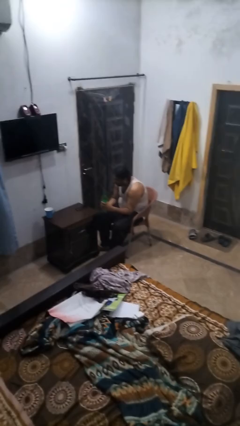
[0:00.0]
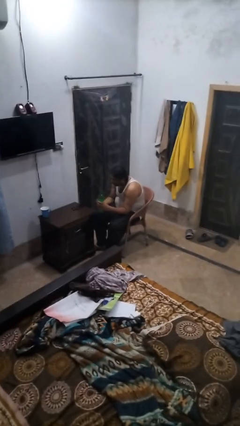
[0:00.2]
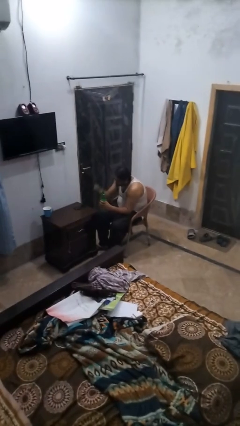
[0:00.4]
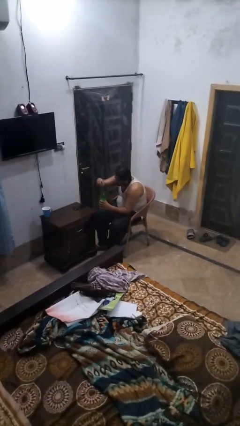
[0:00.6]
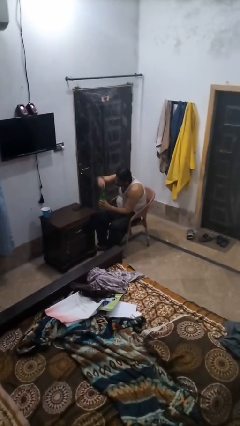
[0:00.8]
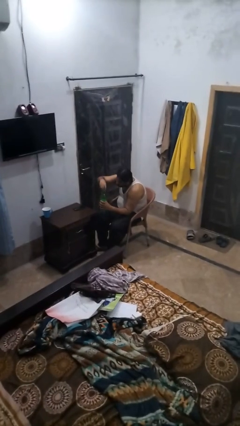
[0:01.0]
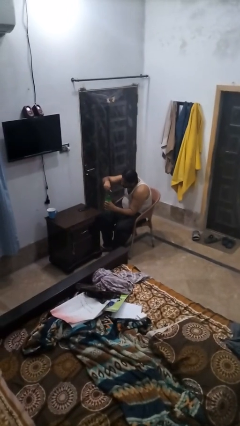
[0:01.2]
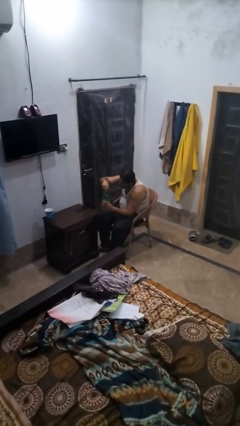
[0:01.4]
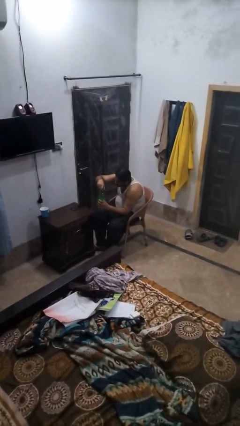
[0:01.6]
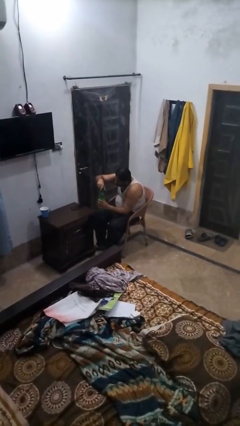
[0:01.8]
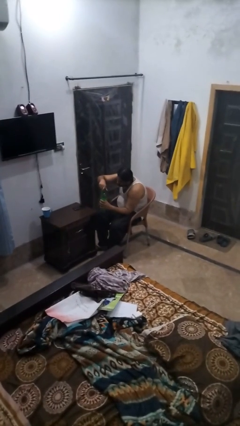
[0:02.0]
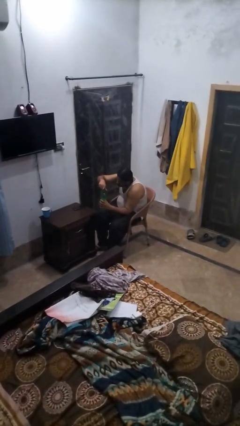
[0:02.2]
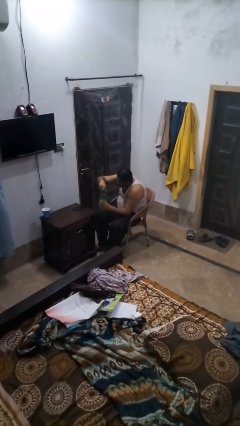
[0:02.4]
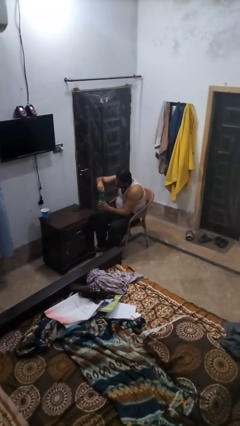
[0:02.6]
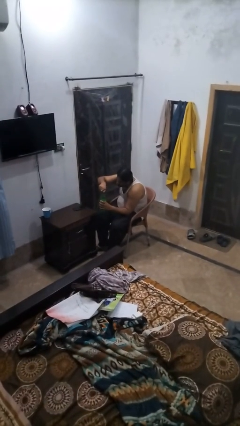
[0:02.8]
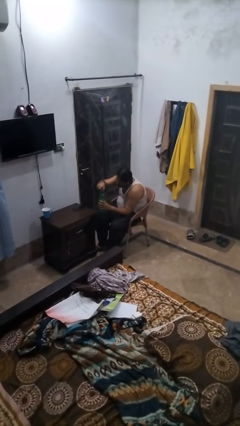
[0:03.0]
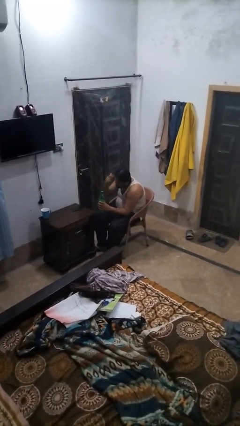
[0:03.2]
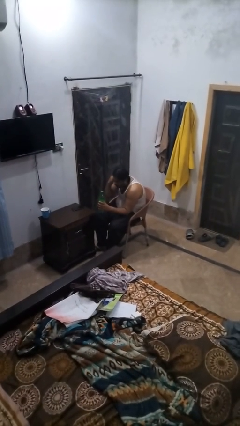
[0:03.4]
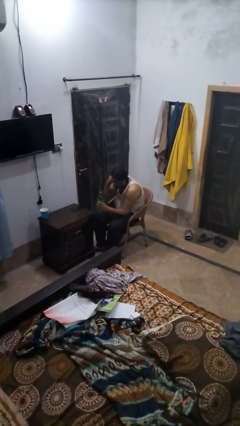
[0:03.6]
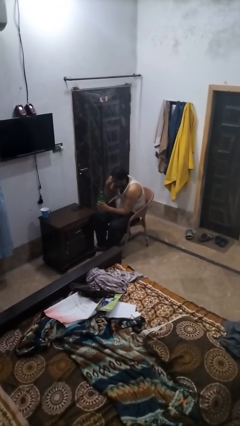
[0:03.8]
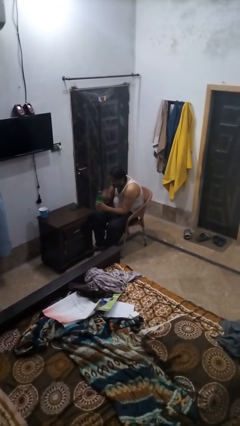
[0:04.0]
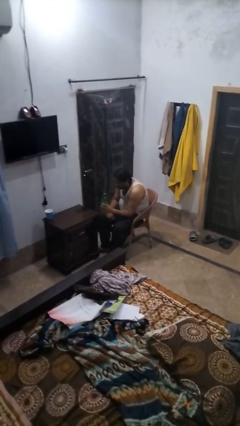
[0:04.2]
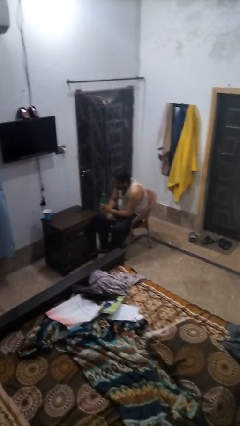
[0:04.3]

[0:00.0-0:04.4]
person screws lid to bottle

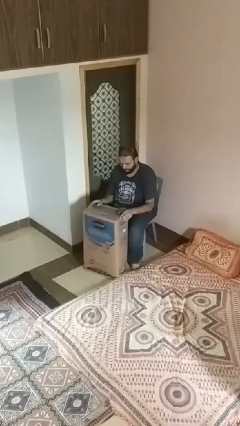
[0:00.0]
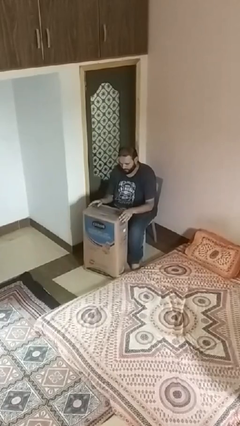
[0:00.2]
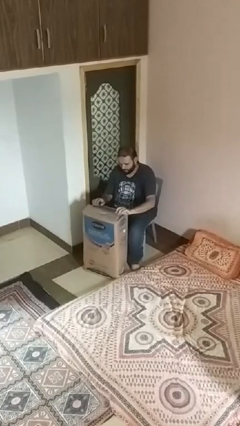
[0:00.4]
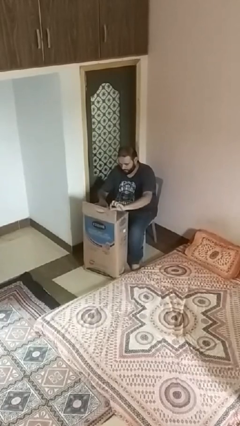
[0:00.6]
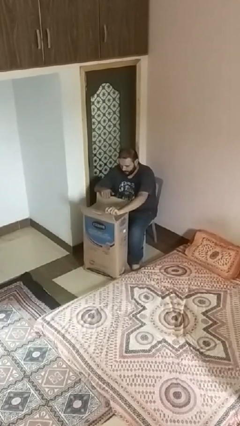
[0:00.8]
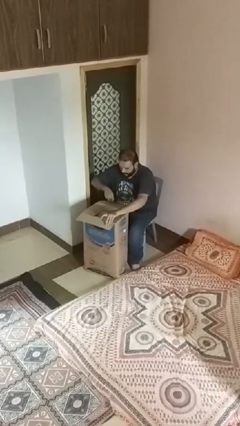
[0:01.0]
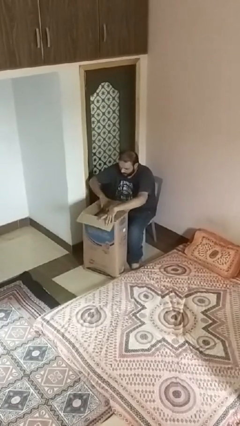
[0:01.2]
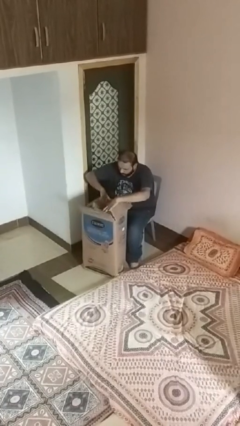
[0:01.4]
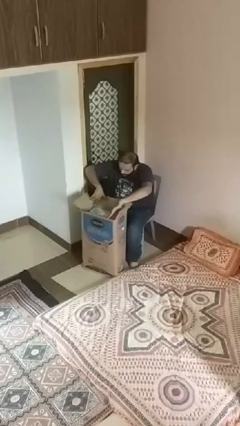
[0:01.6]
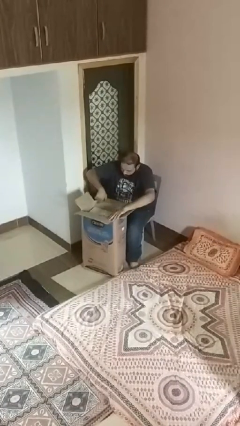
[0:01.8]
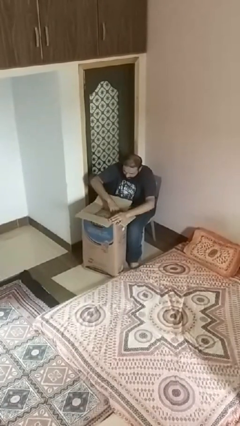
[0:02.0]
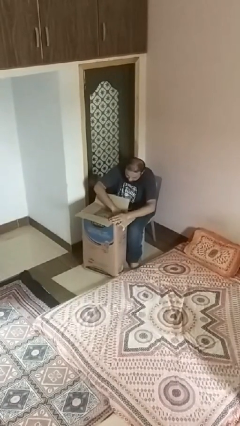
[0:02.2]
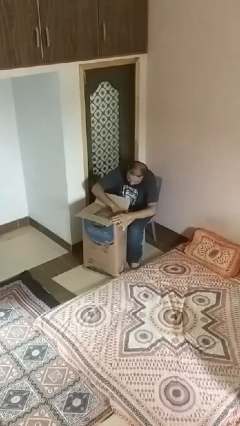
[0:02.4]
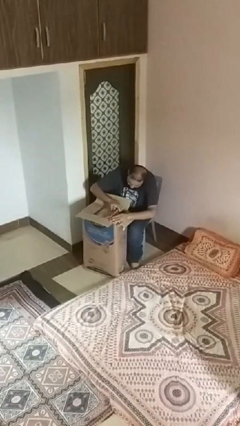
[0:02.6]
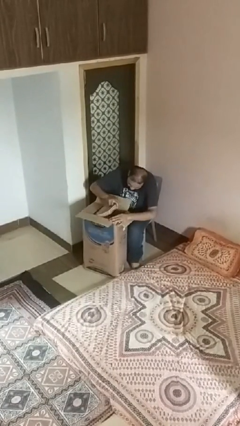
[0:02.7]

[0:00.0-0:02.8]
person searches in box

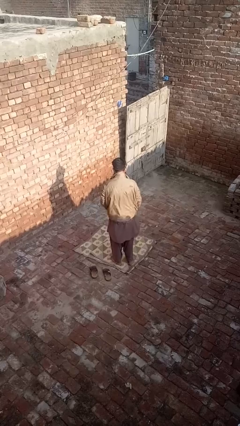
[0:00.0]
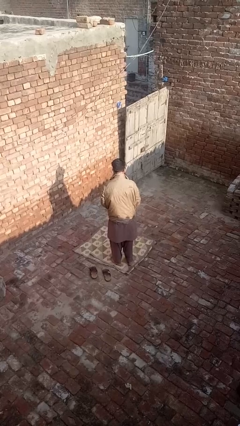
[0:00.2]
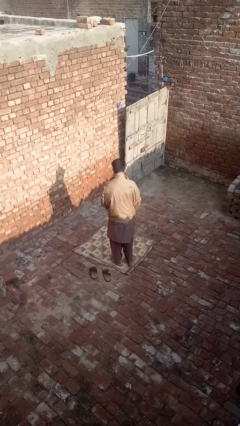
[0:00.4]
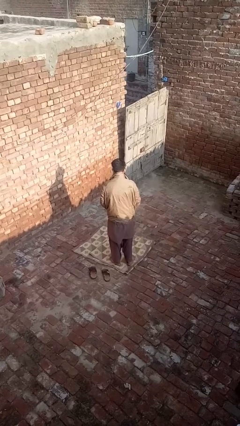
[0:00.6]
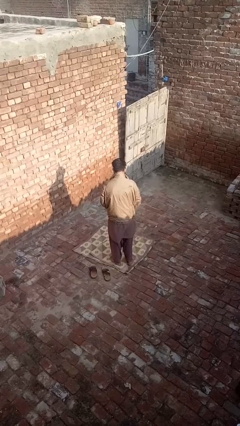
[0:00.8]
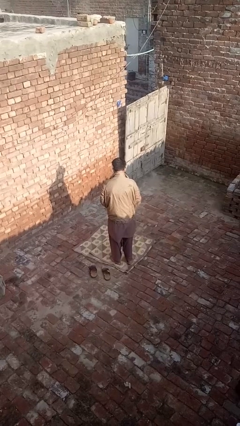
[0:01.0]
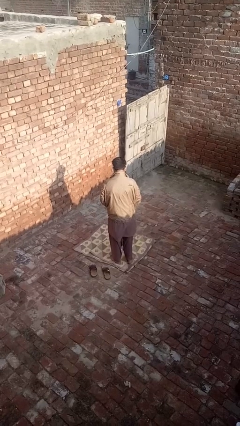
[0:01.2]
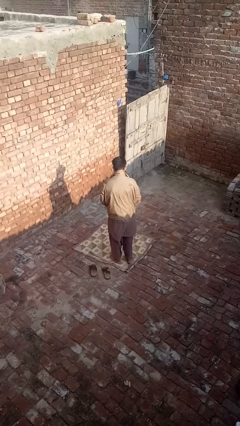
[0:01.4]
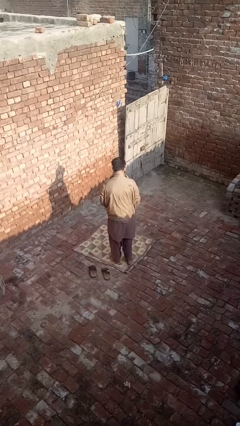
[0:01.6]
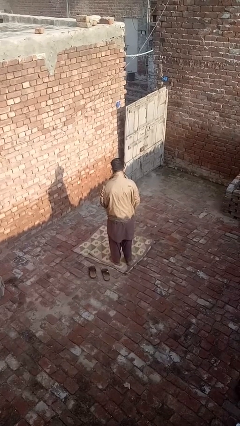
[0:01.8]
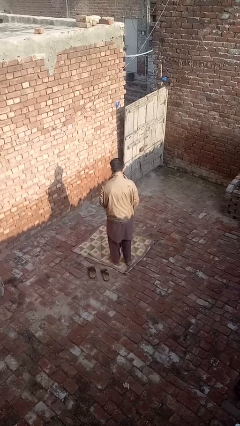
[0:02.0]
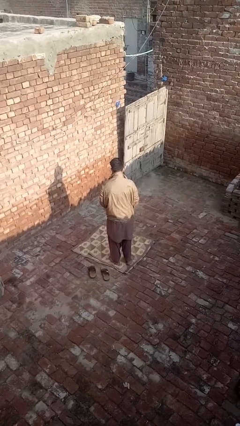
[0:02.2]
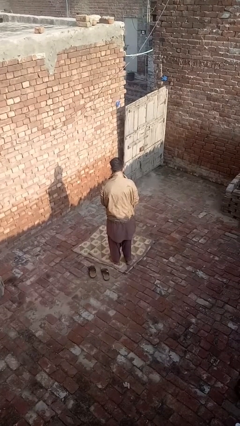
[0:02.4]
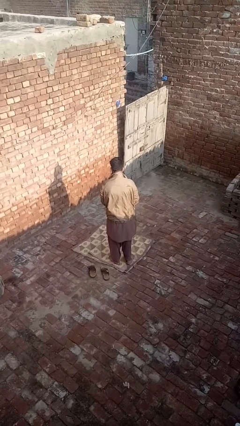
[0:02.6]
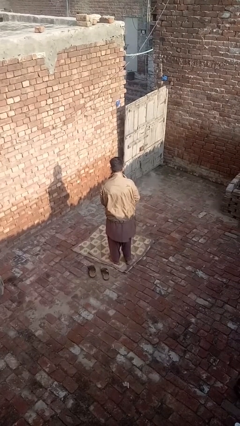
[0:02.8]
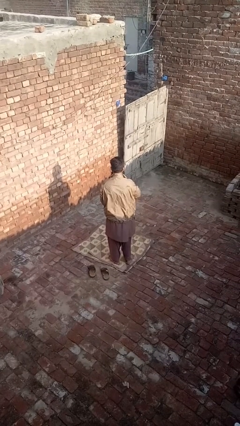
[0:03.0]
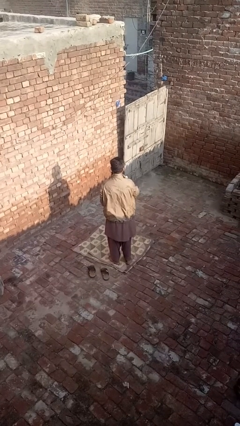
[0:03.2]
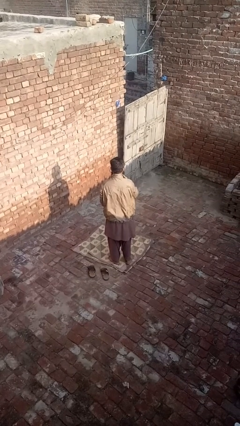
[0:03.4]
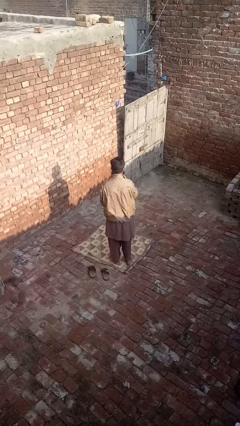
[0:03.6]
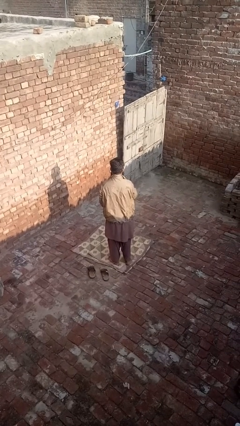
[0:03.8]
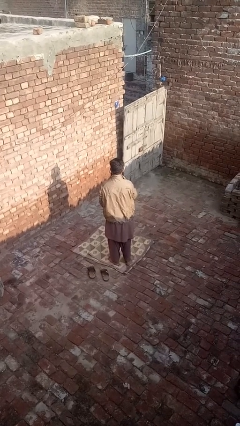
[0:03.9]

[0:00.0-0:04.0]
person zips up jacket

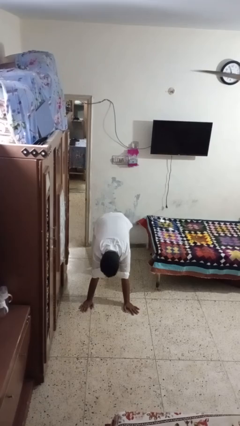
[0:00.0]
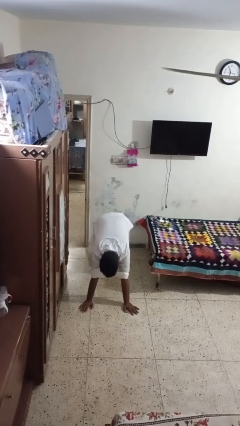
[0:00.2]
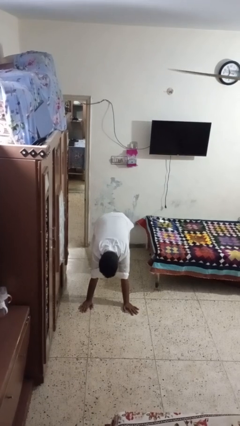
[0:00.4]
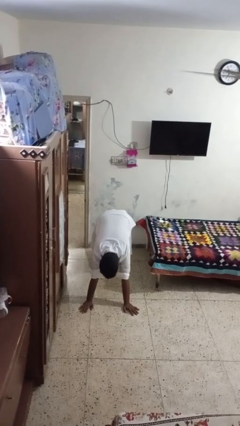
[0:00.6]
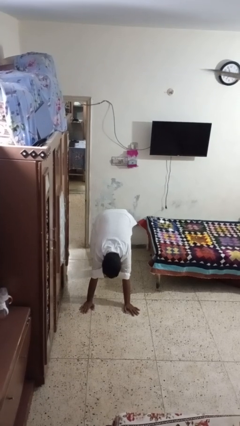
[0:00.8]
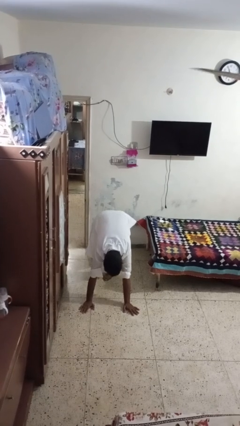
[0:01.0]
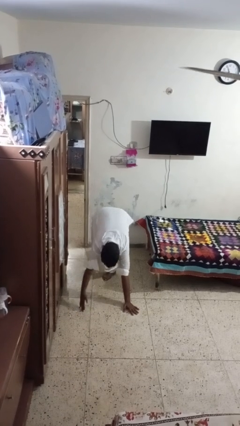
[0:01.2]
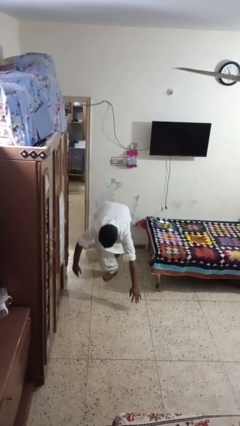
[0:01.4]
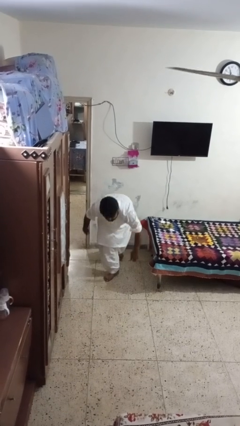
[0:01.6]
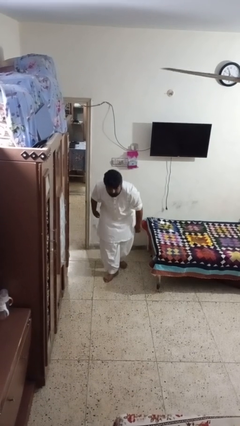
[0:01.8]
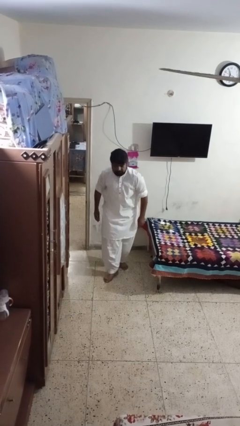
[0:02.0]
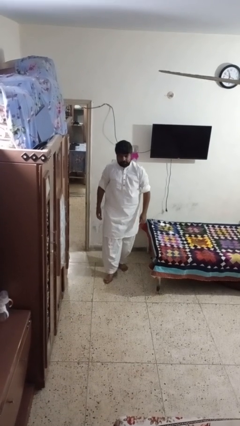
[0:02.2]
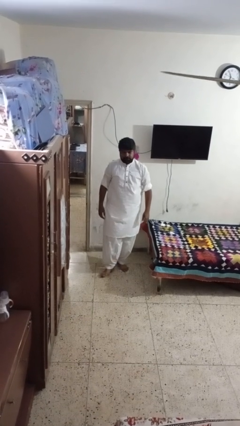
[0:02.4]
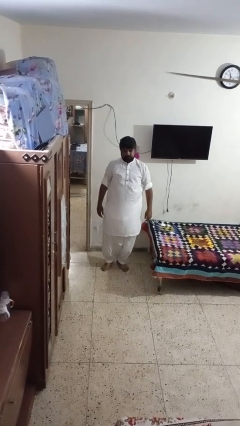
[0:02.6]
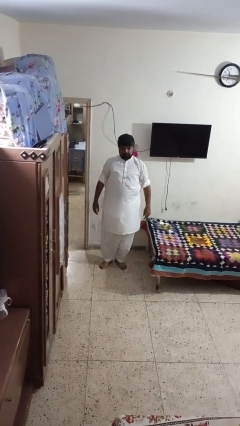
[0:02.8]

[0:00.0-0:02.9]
person stands up from floor

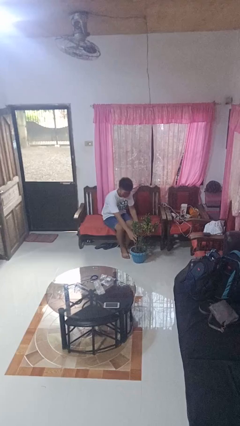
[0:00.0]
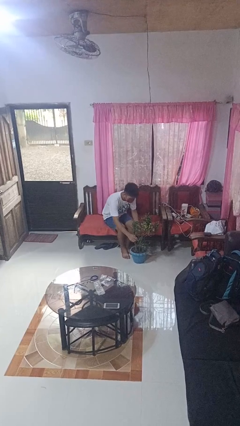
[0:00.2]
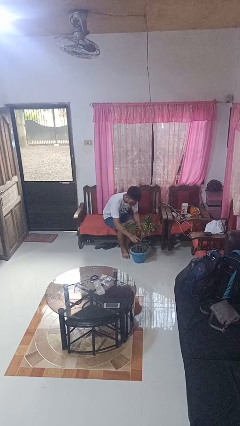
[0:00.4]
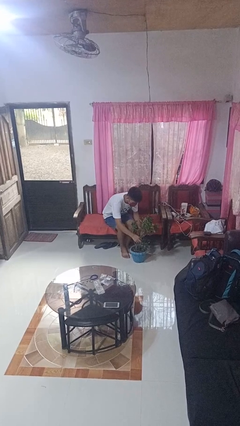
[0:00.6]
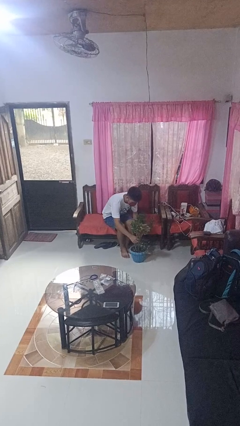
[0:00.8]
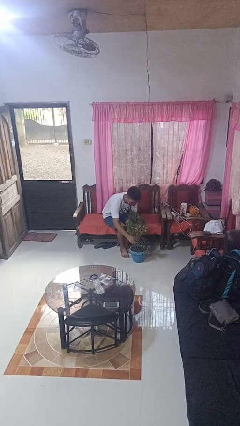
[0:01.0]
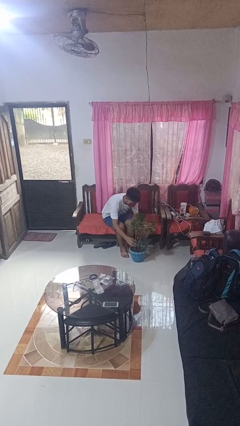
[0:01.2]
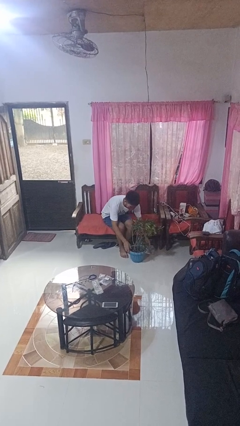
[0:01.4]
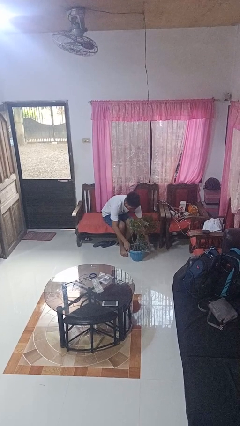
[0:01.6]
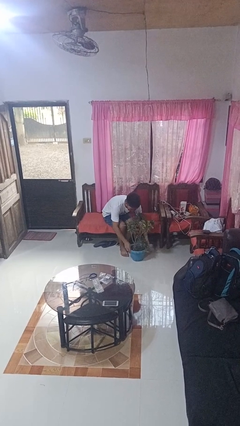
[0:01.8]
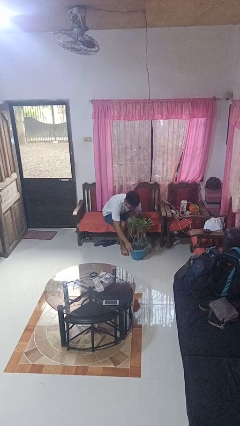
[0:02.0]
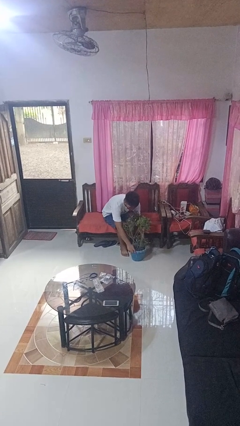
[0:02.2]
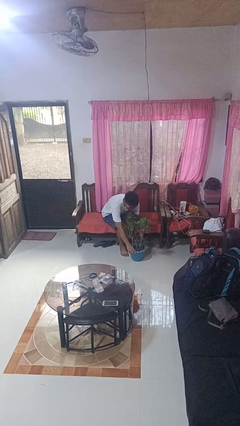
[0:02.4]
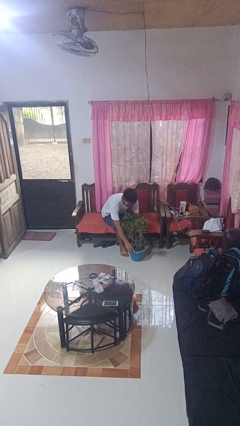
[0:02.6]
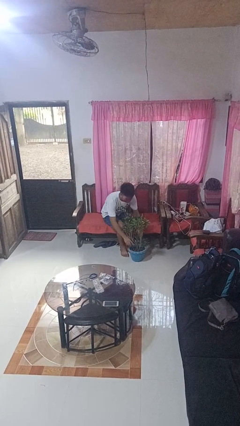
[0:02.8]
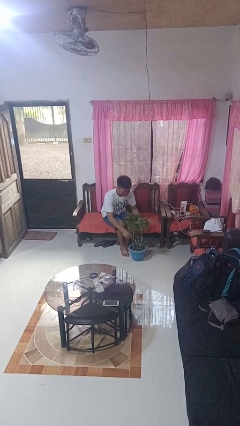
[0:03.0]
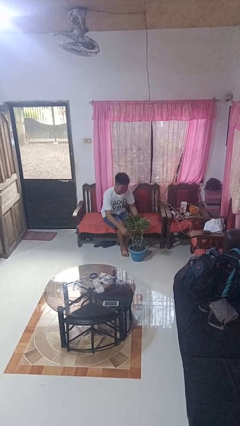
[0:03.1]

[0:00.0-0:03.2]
person arranges flowers in vase

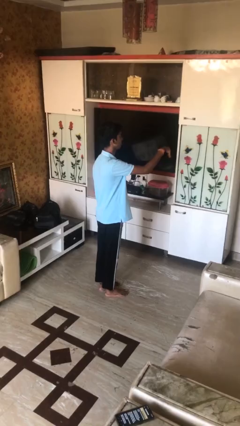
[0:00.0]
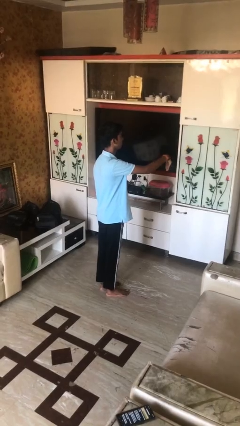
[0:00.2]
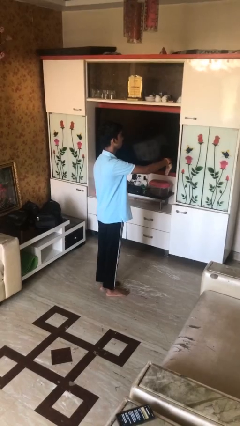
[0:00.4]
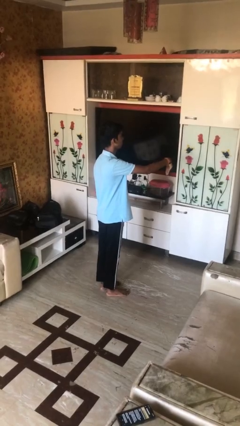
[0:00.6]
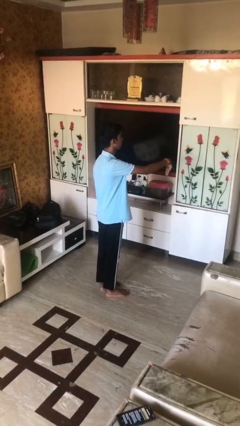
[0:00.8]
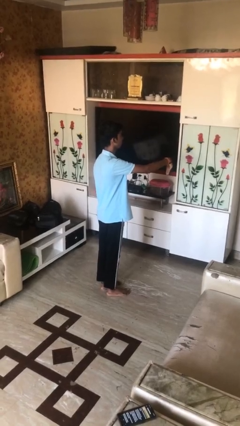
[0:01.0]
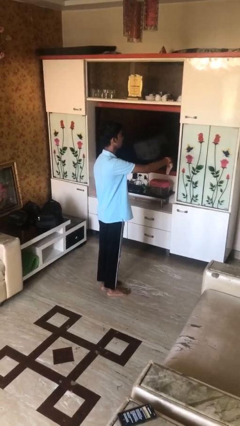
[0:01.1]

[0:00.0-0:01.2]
person gestures swipe down
